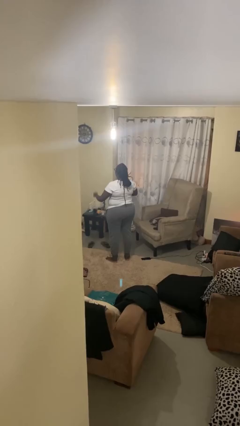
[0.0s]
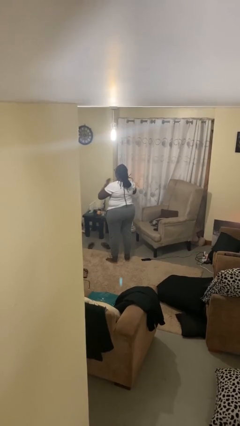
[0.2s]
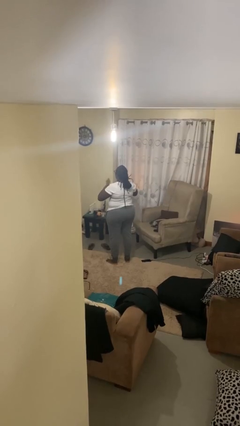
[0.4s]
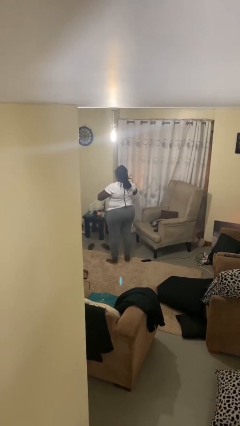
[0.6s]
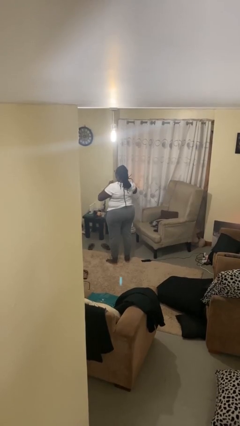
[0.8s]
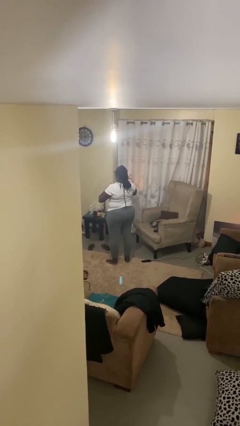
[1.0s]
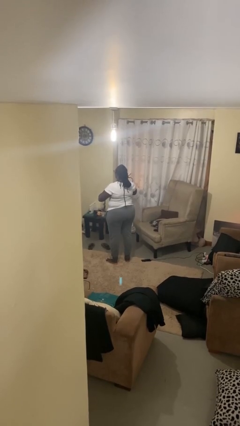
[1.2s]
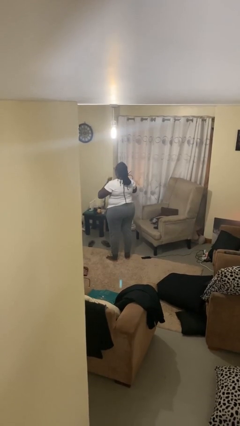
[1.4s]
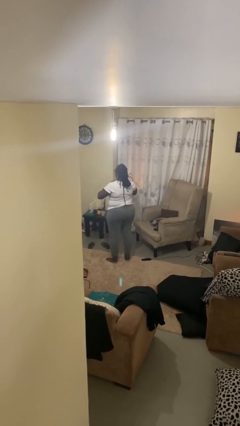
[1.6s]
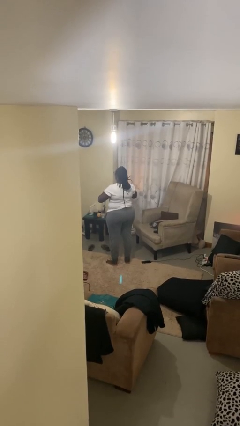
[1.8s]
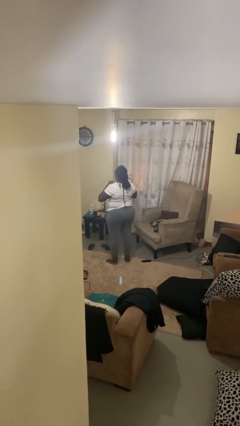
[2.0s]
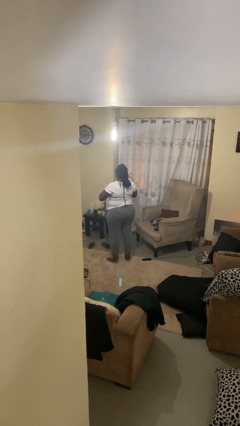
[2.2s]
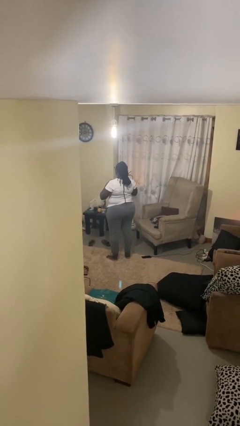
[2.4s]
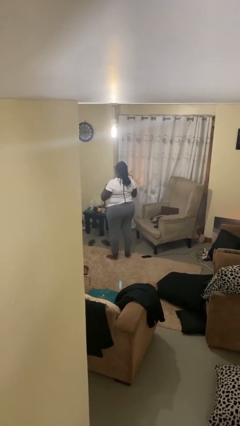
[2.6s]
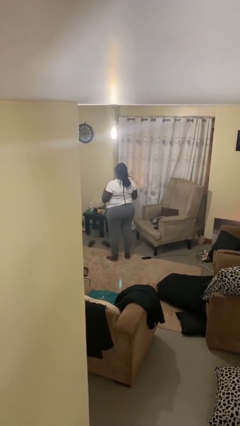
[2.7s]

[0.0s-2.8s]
person drums on chest

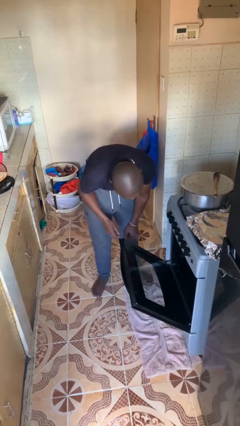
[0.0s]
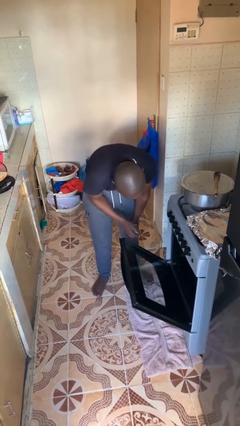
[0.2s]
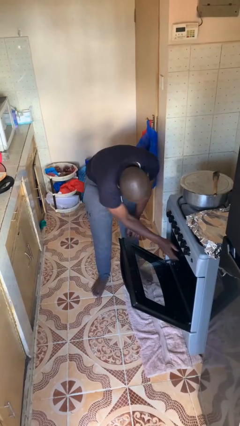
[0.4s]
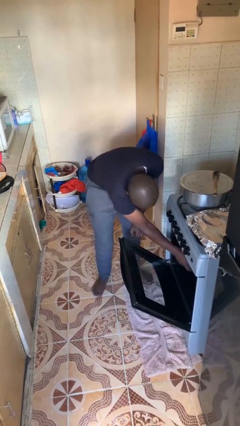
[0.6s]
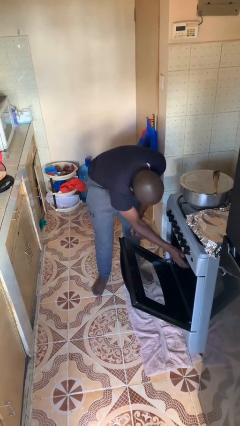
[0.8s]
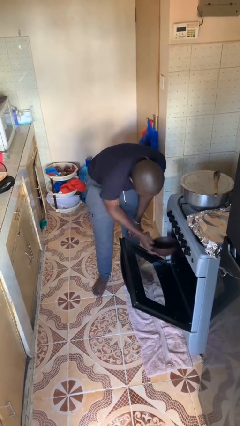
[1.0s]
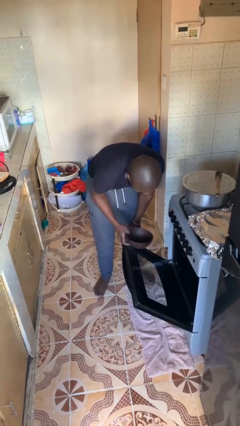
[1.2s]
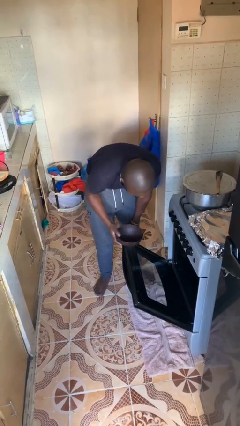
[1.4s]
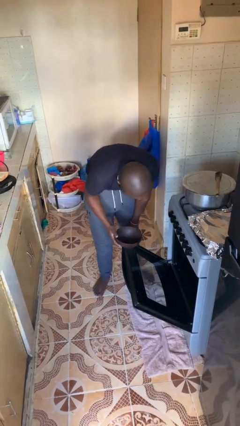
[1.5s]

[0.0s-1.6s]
person takes object from oven

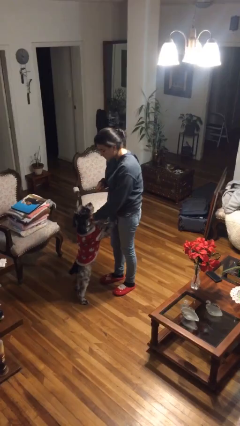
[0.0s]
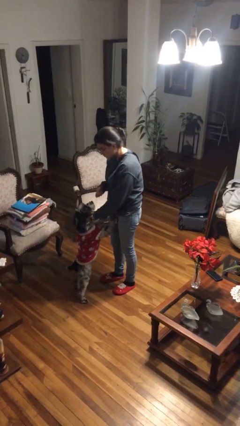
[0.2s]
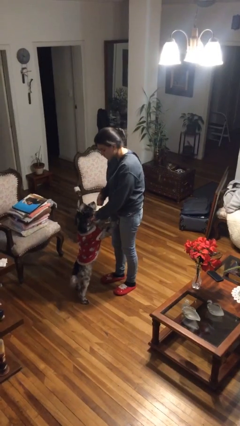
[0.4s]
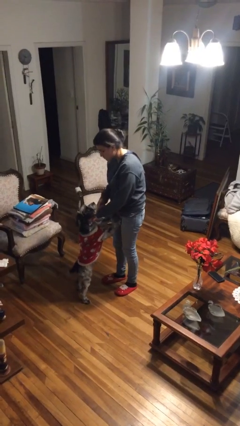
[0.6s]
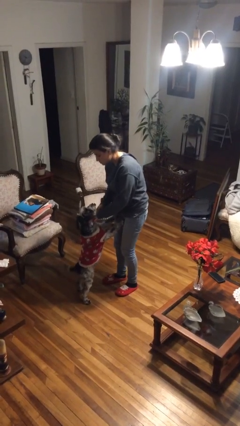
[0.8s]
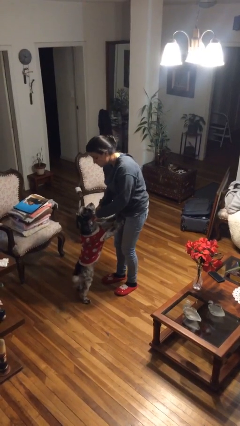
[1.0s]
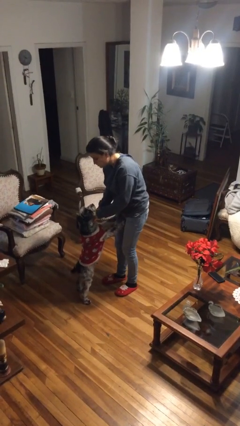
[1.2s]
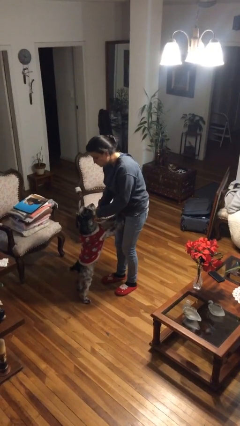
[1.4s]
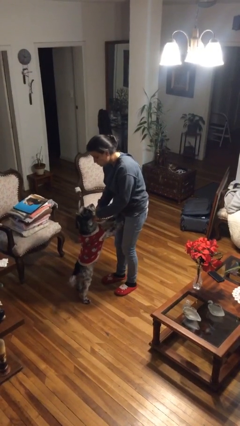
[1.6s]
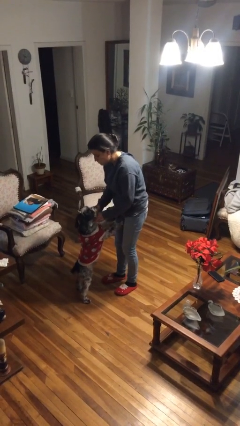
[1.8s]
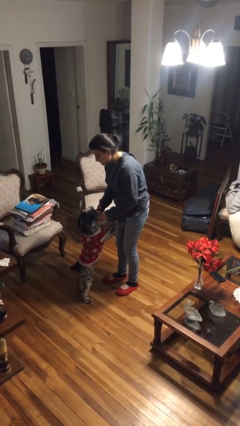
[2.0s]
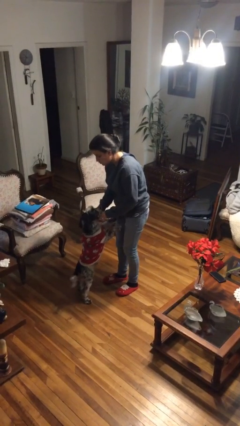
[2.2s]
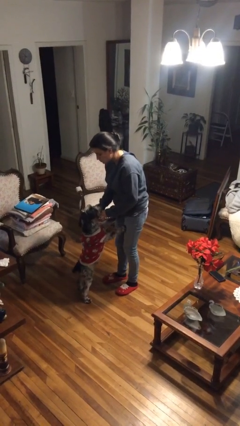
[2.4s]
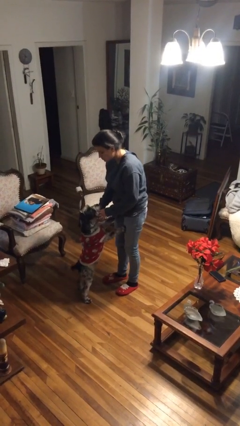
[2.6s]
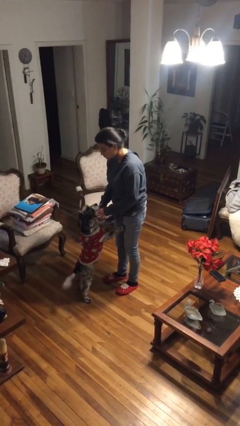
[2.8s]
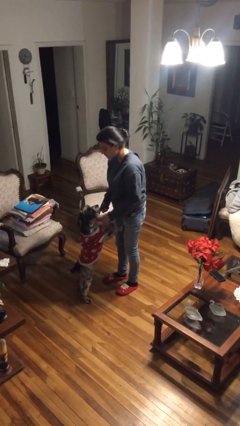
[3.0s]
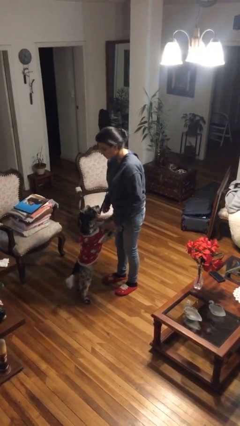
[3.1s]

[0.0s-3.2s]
person attaches leash to dog

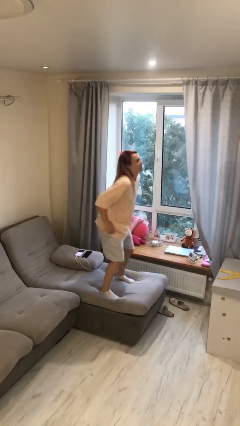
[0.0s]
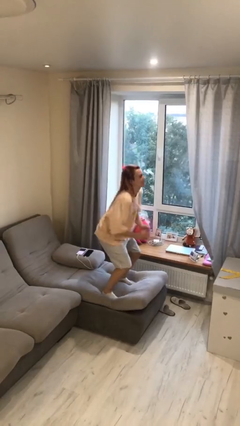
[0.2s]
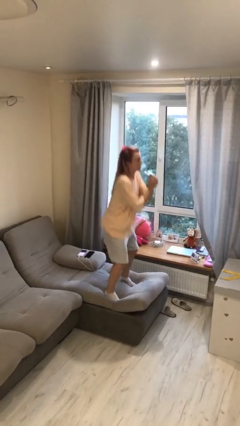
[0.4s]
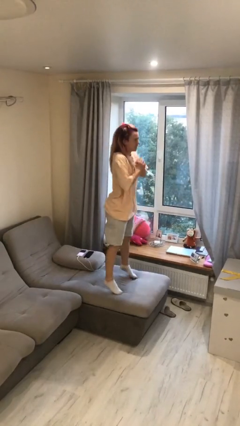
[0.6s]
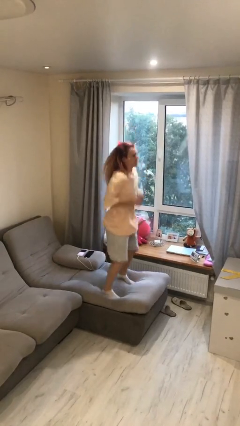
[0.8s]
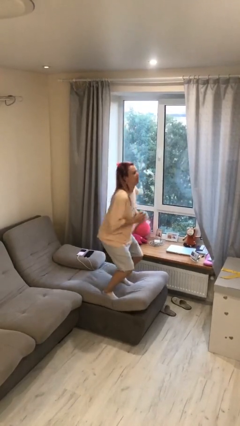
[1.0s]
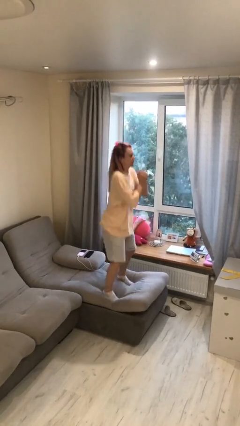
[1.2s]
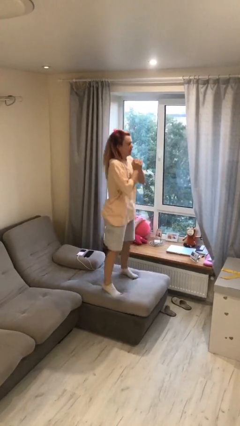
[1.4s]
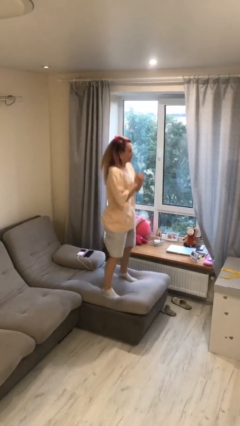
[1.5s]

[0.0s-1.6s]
person jumps on couch

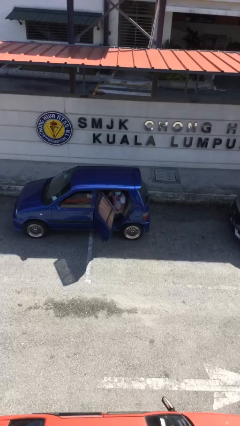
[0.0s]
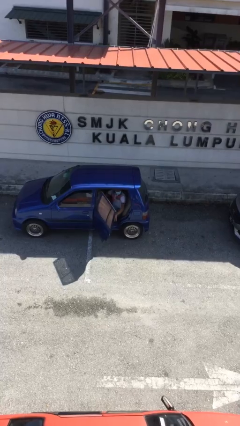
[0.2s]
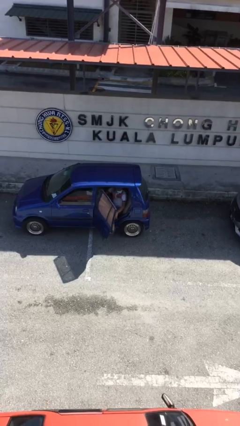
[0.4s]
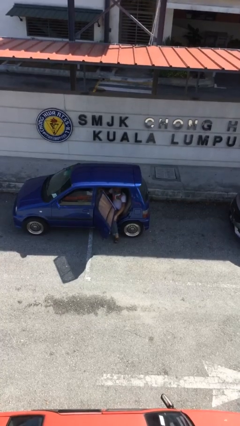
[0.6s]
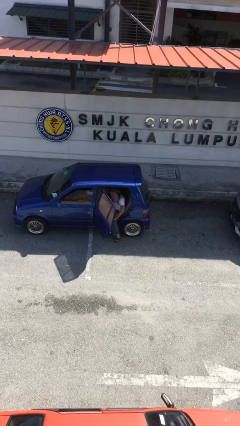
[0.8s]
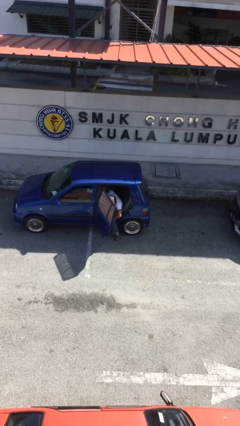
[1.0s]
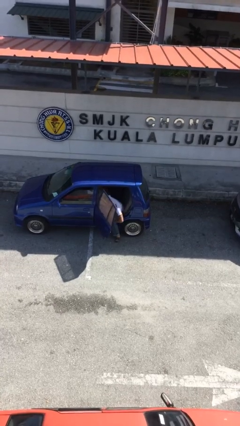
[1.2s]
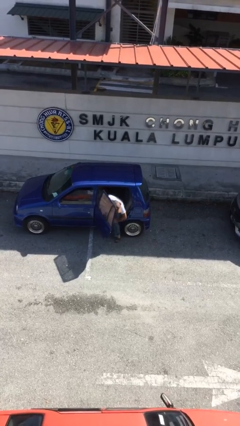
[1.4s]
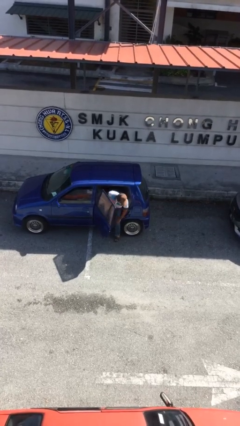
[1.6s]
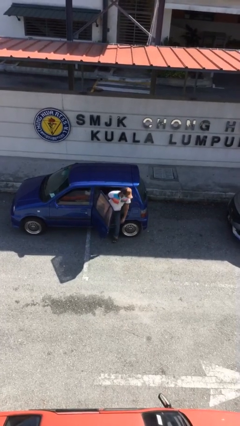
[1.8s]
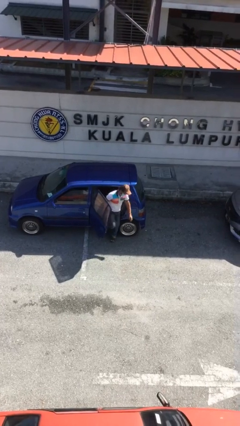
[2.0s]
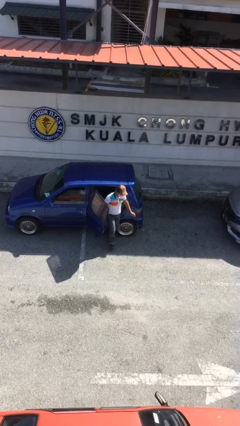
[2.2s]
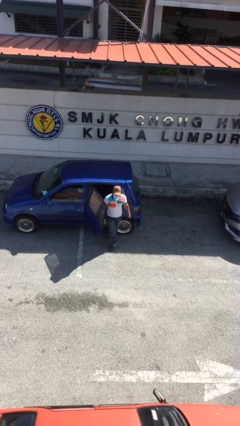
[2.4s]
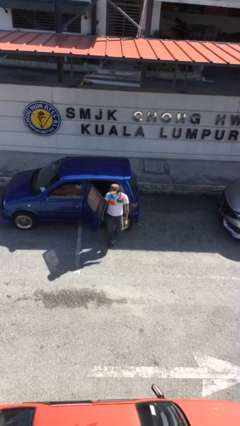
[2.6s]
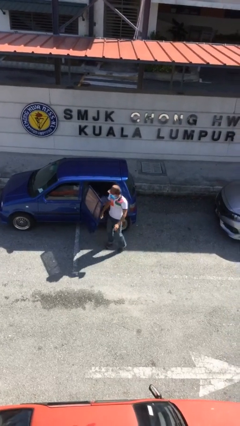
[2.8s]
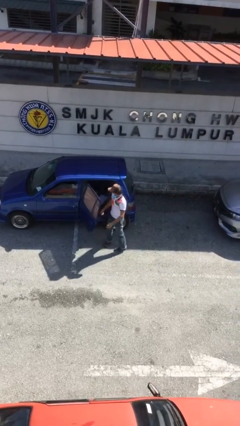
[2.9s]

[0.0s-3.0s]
person exits car

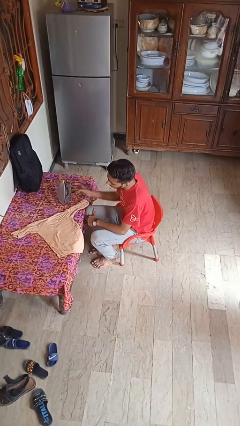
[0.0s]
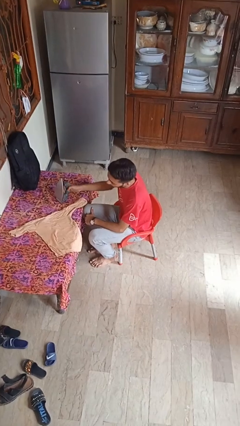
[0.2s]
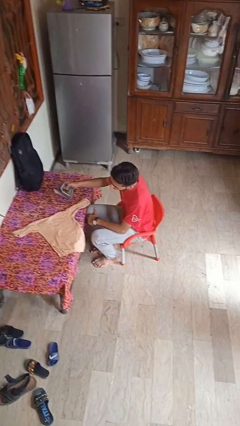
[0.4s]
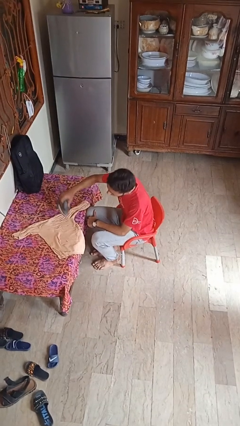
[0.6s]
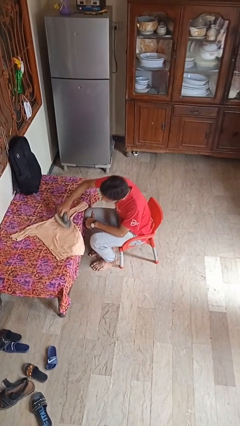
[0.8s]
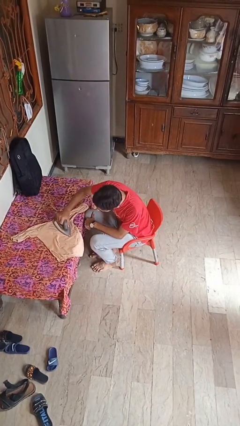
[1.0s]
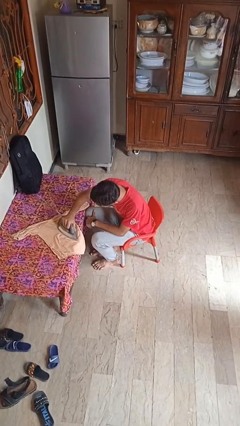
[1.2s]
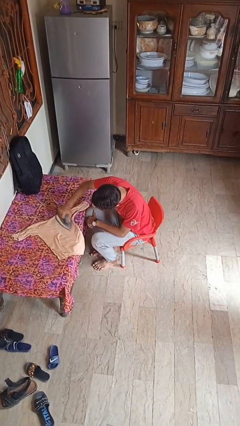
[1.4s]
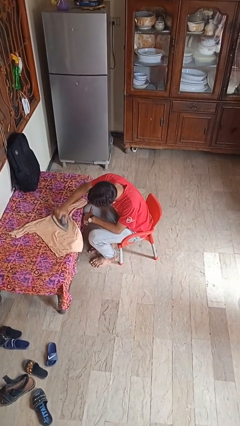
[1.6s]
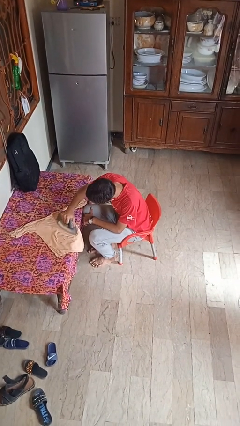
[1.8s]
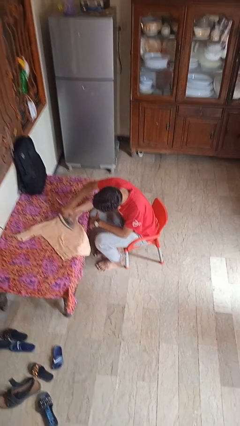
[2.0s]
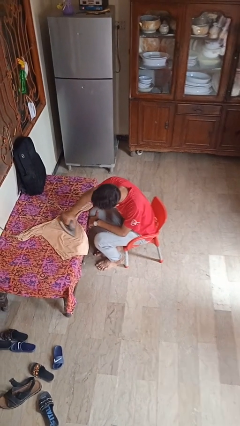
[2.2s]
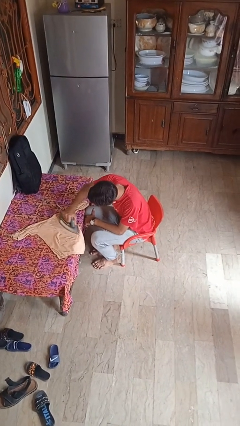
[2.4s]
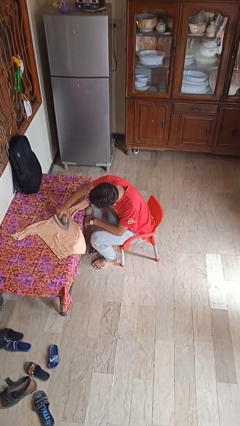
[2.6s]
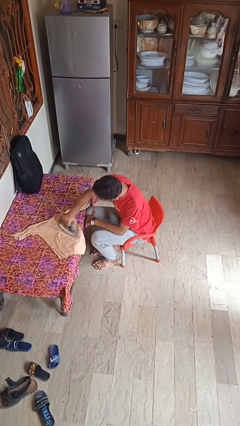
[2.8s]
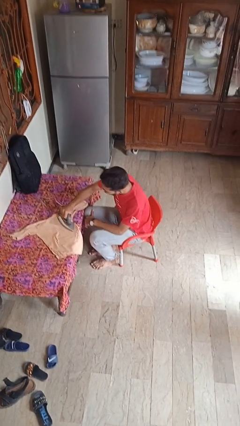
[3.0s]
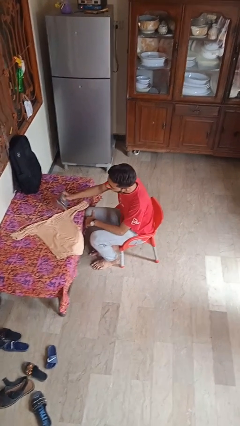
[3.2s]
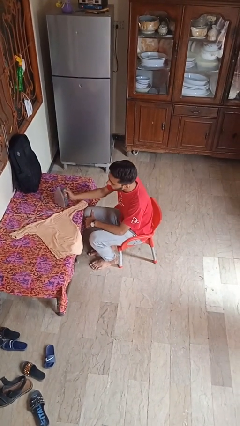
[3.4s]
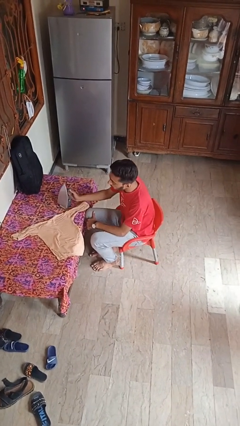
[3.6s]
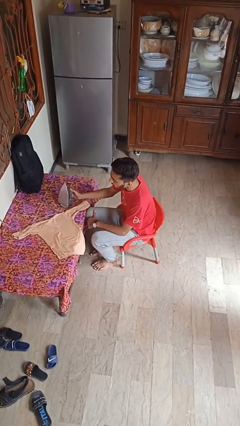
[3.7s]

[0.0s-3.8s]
person irons clothes

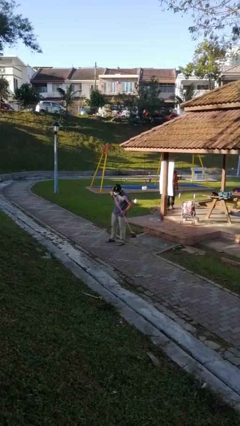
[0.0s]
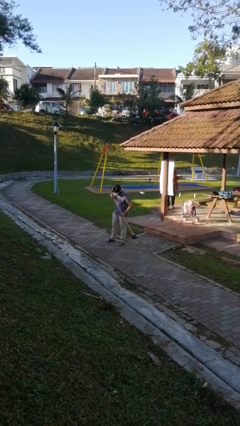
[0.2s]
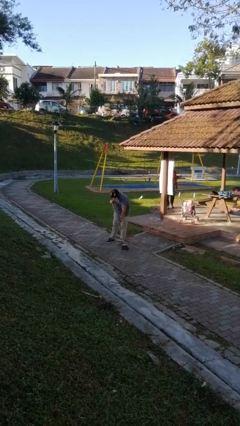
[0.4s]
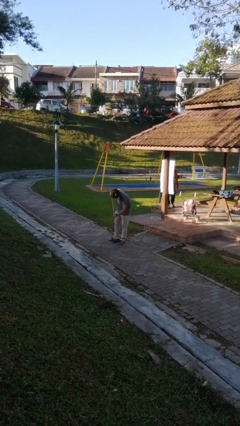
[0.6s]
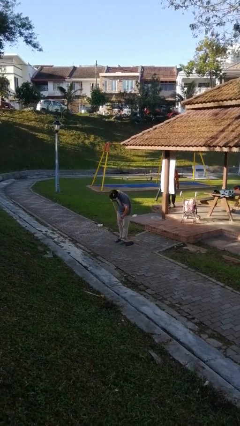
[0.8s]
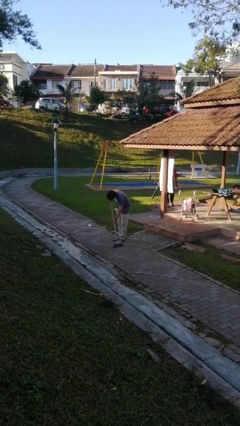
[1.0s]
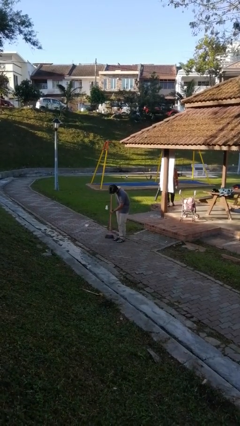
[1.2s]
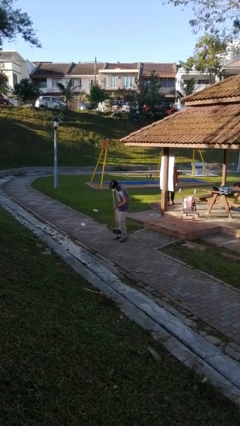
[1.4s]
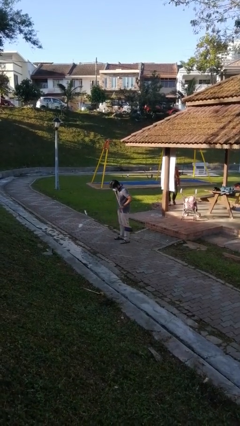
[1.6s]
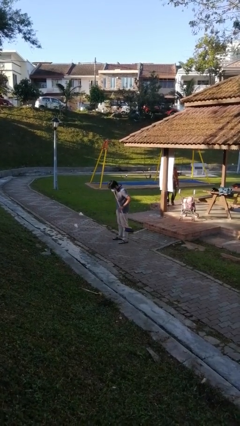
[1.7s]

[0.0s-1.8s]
person sweeps floor
